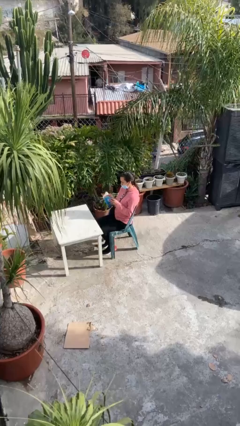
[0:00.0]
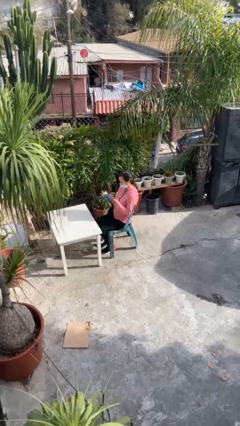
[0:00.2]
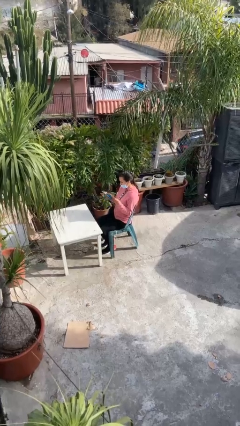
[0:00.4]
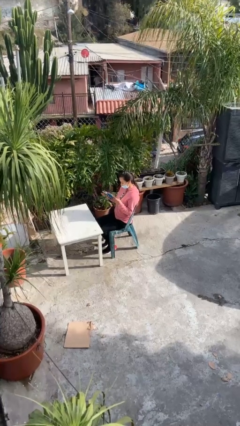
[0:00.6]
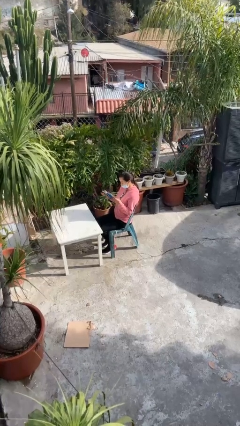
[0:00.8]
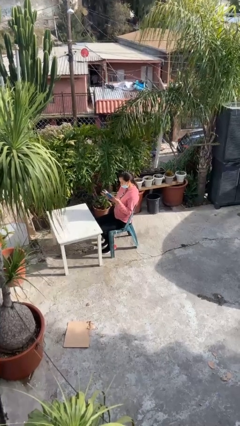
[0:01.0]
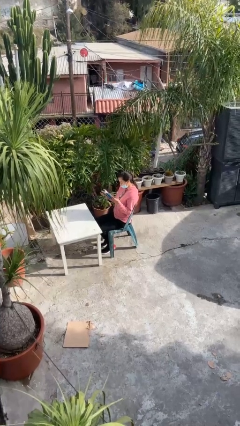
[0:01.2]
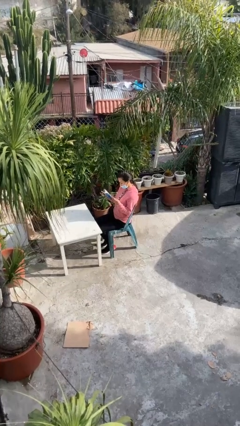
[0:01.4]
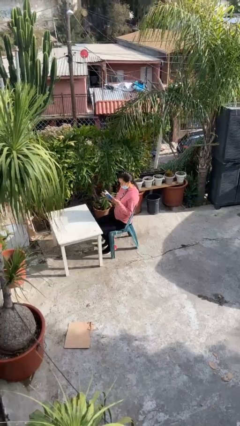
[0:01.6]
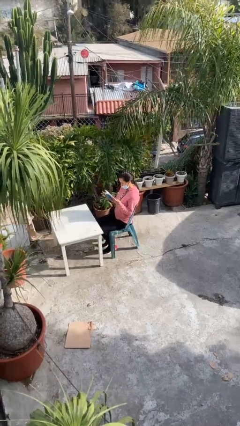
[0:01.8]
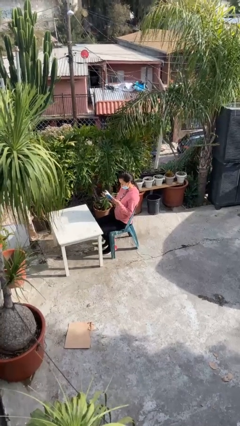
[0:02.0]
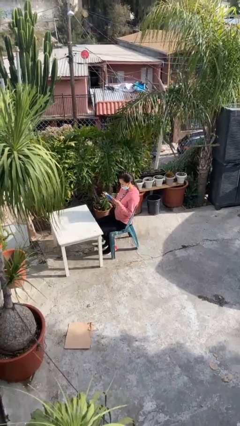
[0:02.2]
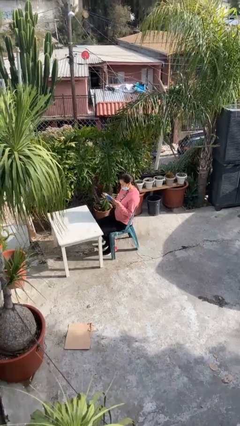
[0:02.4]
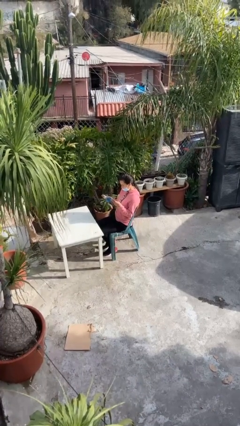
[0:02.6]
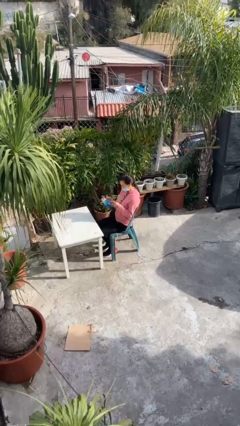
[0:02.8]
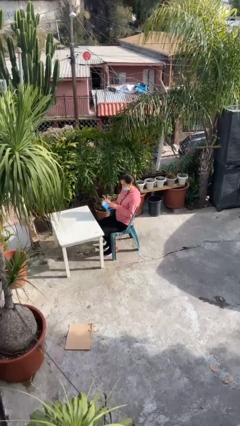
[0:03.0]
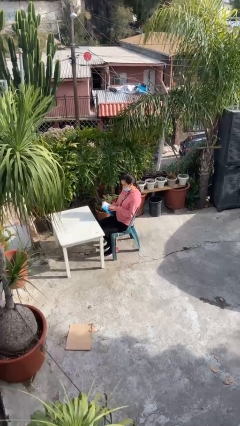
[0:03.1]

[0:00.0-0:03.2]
person reads document

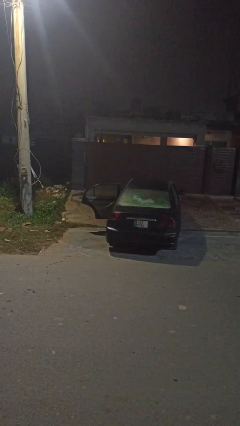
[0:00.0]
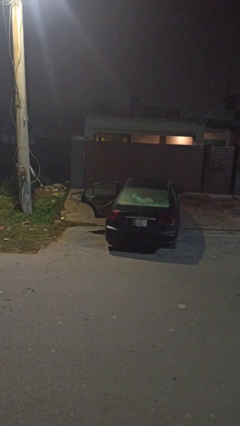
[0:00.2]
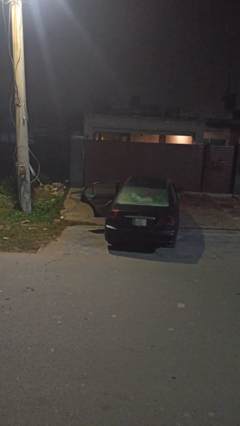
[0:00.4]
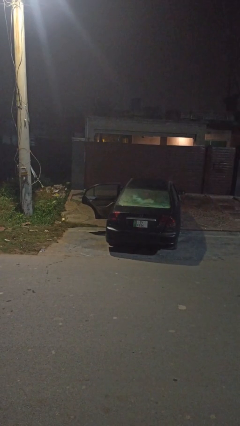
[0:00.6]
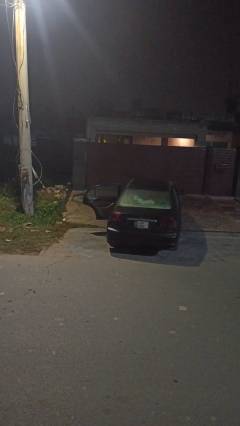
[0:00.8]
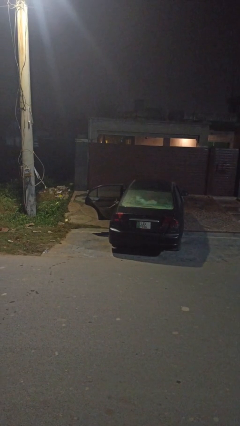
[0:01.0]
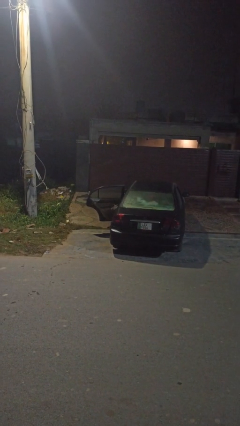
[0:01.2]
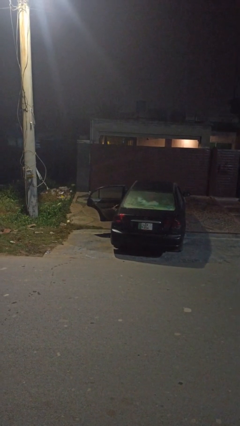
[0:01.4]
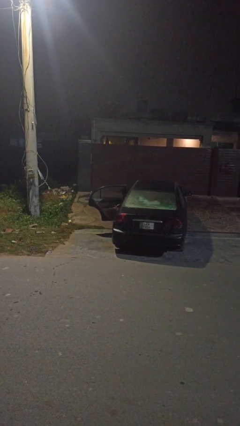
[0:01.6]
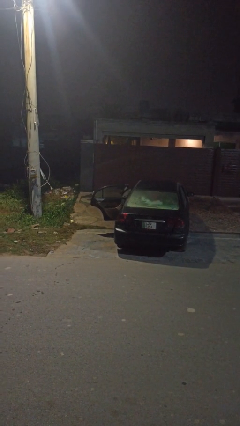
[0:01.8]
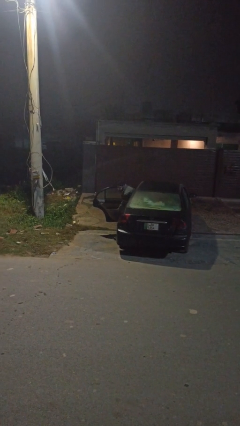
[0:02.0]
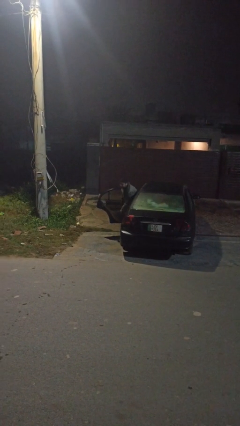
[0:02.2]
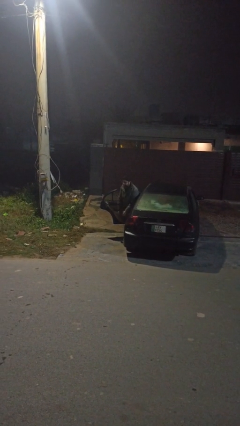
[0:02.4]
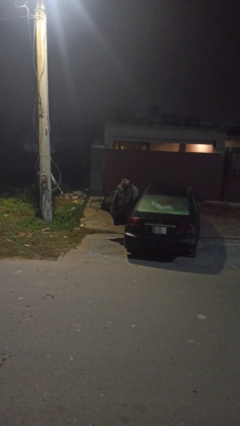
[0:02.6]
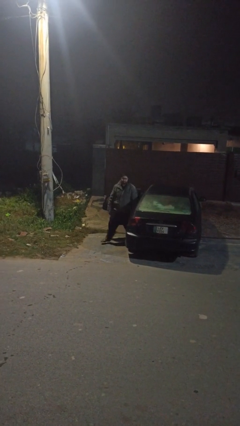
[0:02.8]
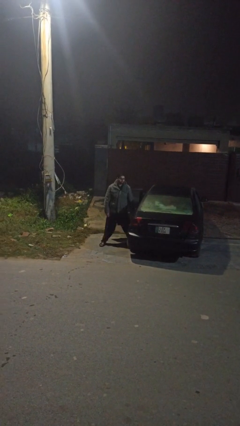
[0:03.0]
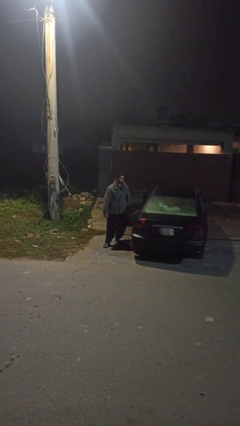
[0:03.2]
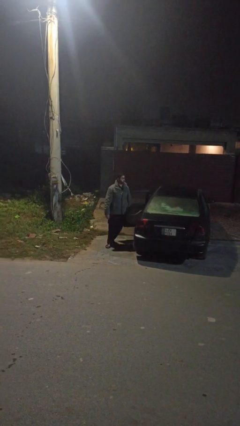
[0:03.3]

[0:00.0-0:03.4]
person exits car

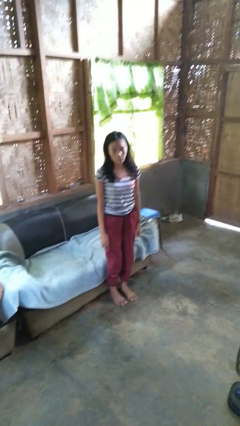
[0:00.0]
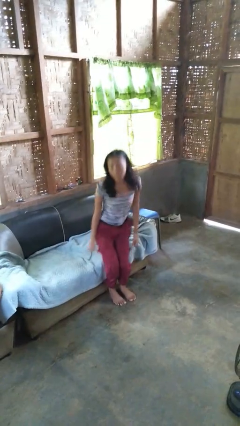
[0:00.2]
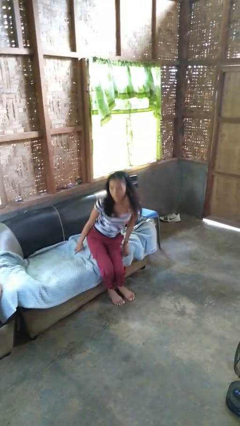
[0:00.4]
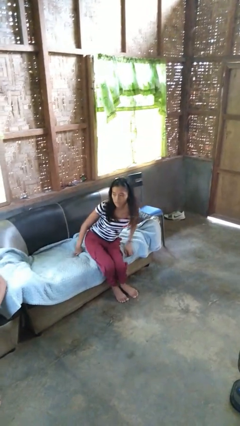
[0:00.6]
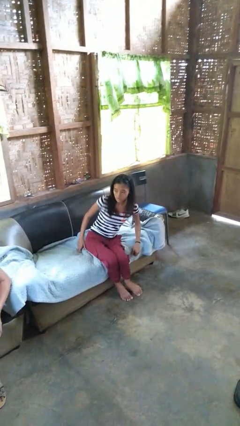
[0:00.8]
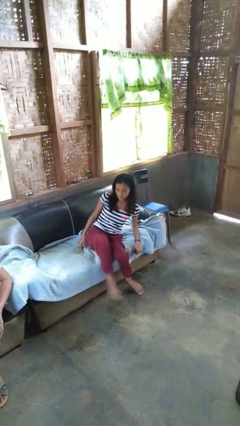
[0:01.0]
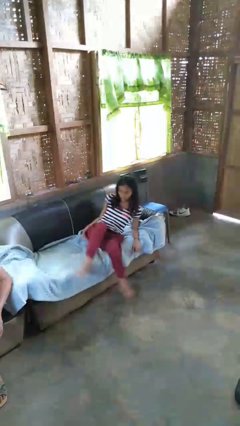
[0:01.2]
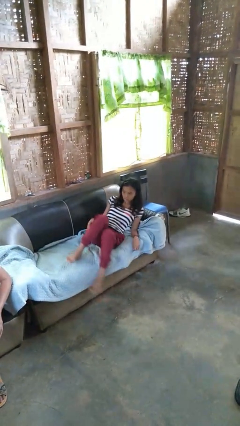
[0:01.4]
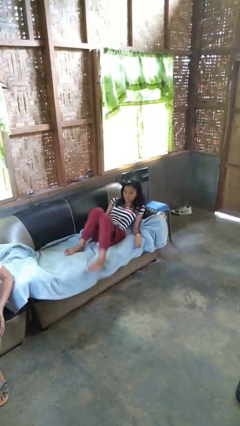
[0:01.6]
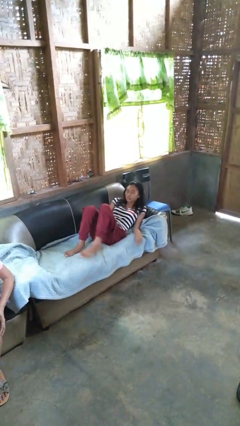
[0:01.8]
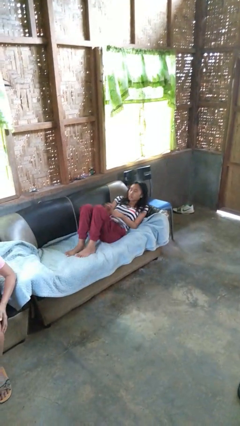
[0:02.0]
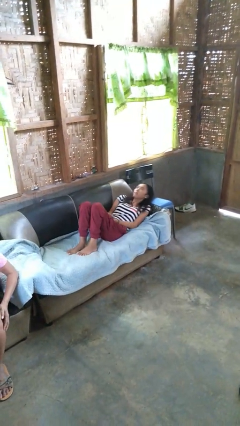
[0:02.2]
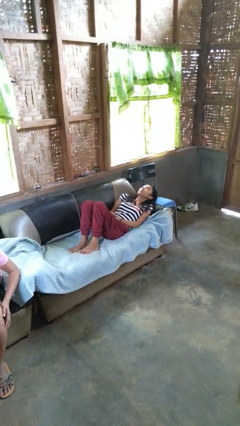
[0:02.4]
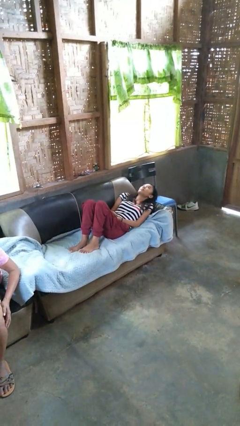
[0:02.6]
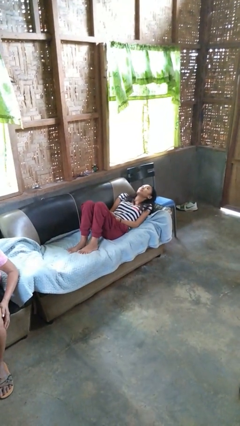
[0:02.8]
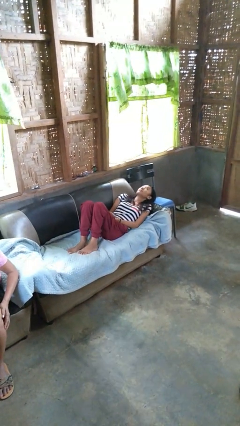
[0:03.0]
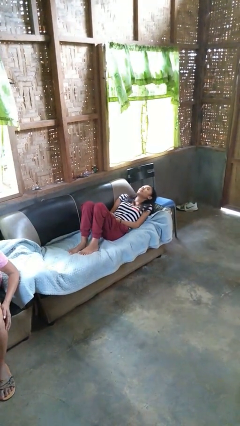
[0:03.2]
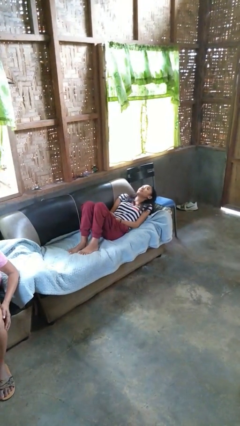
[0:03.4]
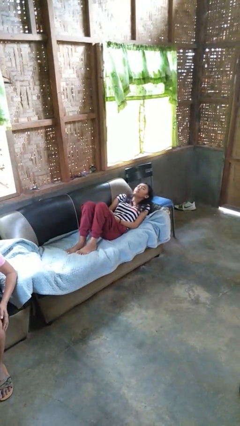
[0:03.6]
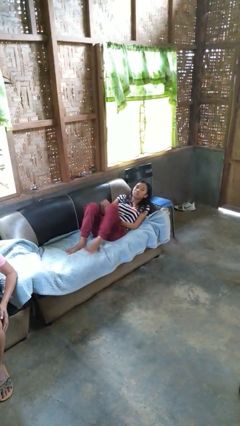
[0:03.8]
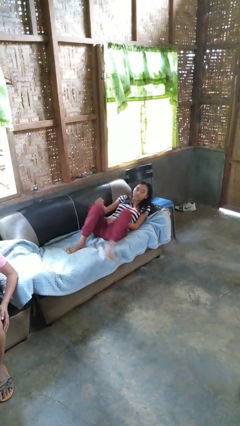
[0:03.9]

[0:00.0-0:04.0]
person lies down on couch

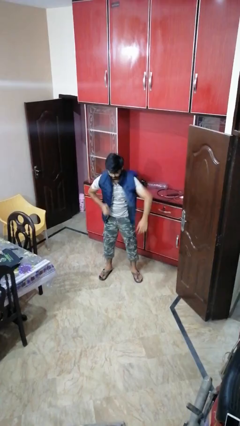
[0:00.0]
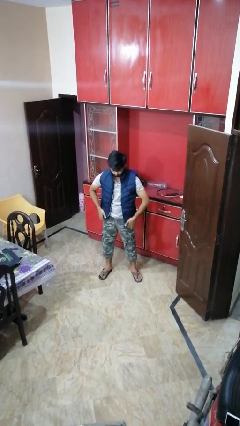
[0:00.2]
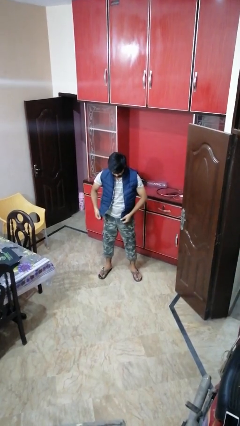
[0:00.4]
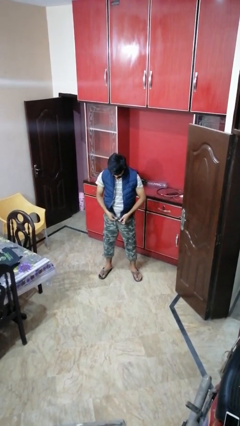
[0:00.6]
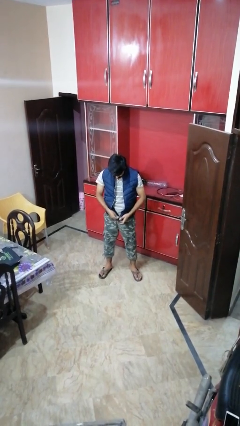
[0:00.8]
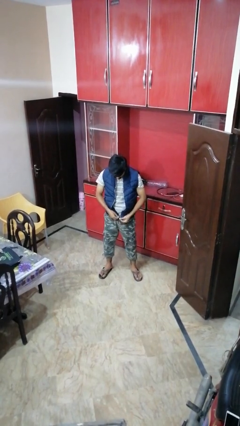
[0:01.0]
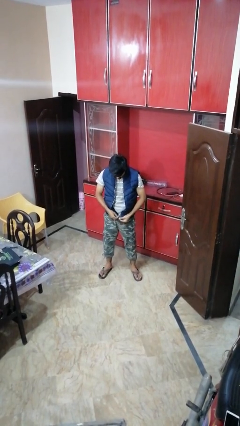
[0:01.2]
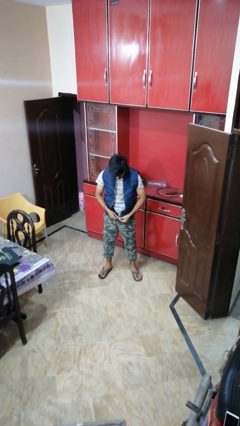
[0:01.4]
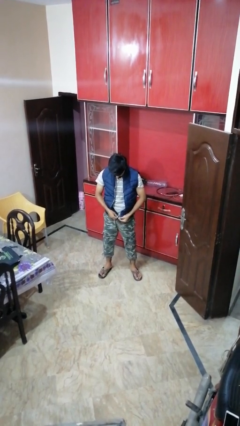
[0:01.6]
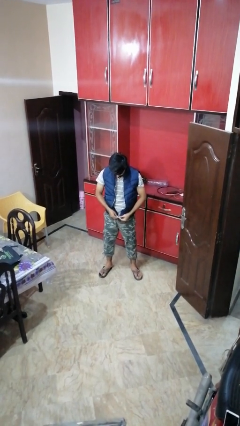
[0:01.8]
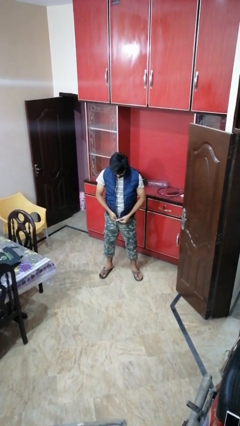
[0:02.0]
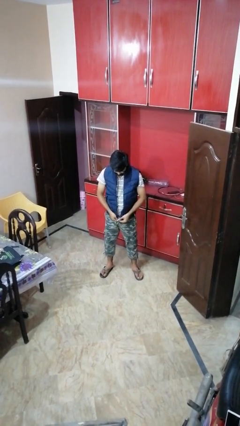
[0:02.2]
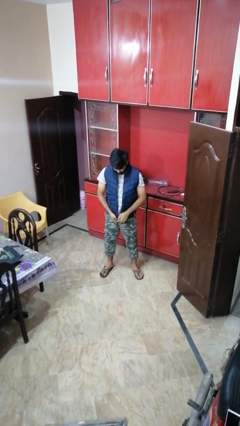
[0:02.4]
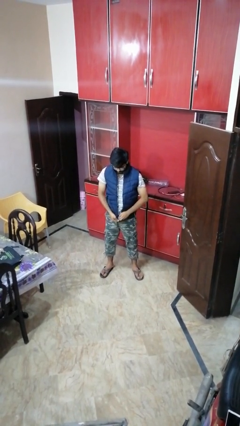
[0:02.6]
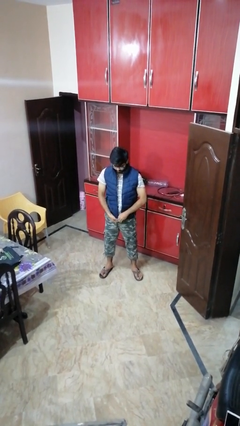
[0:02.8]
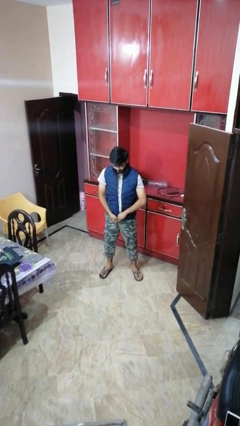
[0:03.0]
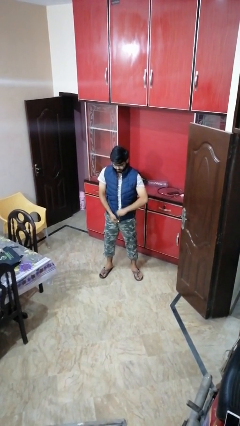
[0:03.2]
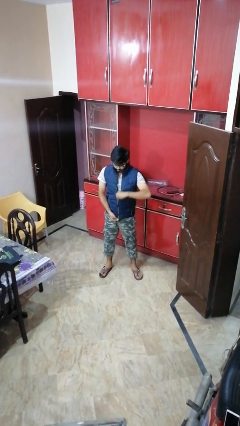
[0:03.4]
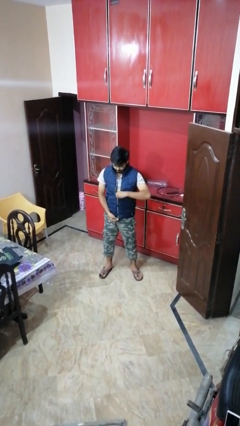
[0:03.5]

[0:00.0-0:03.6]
person zips up jacket

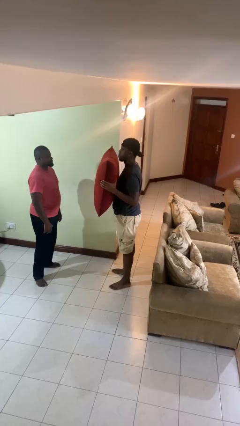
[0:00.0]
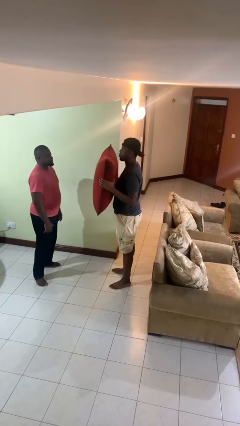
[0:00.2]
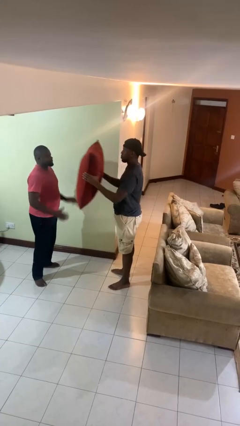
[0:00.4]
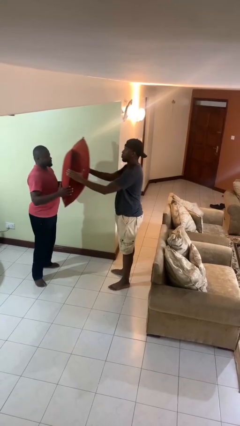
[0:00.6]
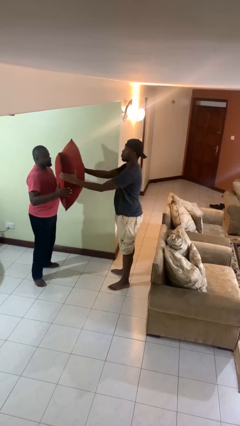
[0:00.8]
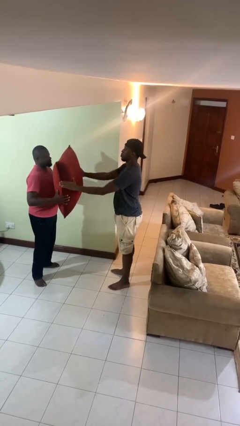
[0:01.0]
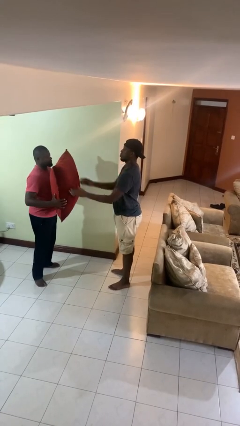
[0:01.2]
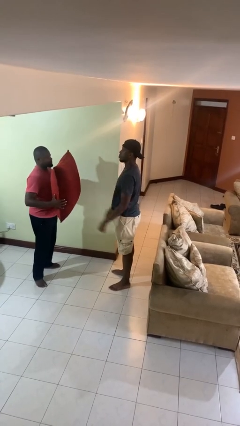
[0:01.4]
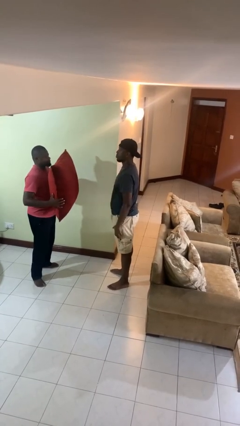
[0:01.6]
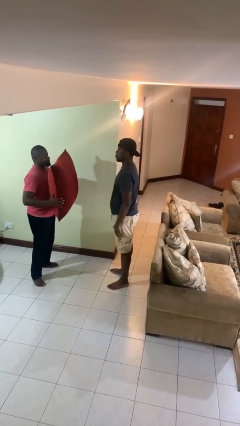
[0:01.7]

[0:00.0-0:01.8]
person transfers object to person

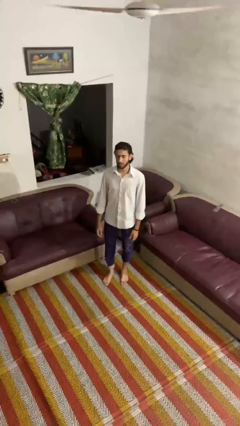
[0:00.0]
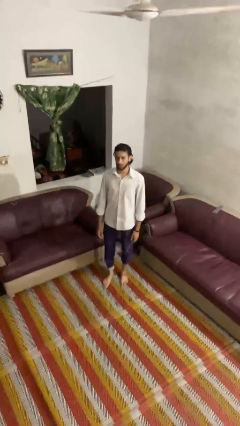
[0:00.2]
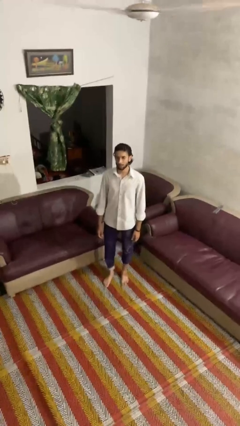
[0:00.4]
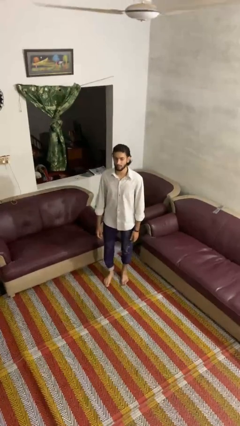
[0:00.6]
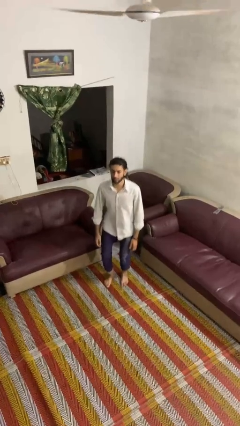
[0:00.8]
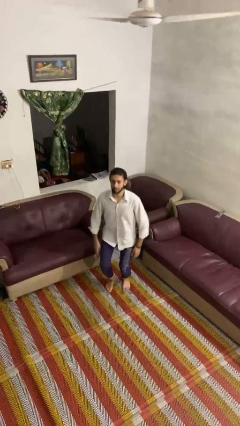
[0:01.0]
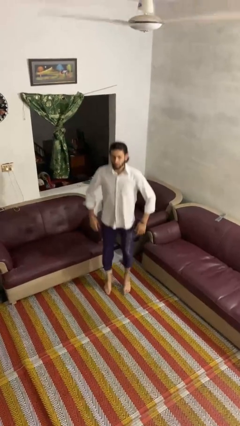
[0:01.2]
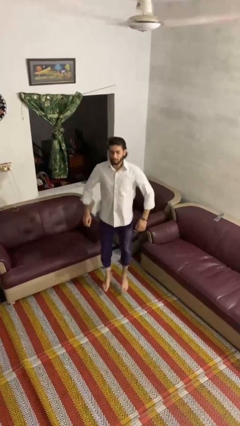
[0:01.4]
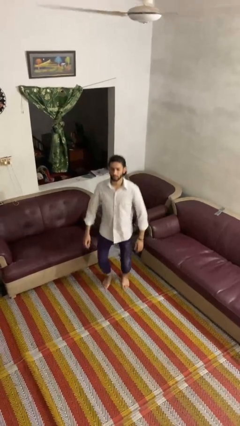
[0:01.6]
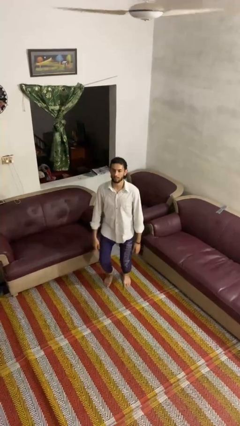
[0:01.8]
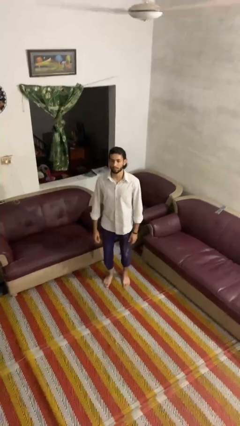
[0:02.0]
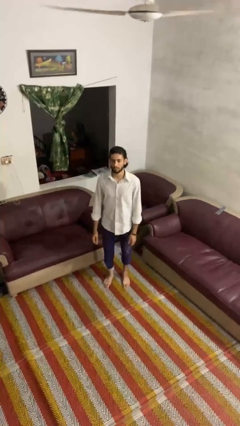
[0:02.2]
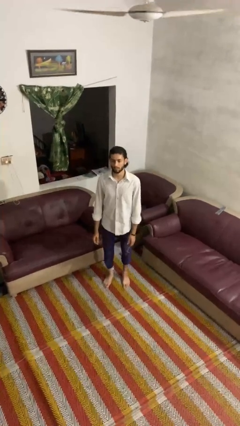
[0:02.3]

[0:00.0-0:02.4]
person jumps
